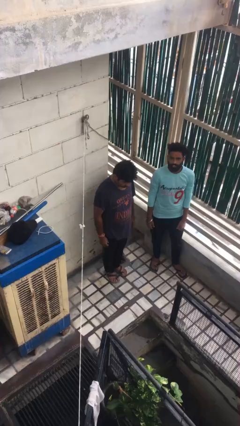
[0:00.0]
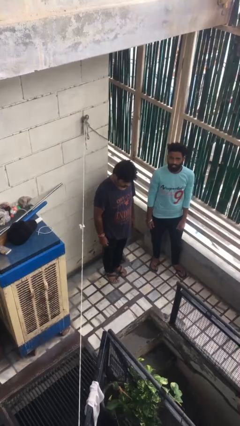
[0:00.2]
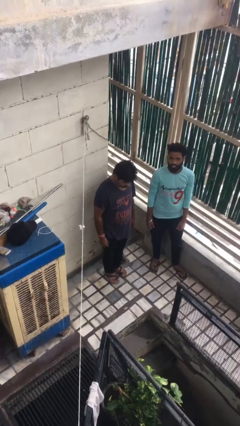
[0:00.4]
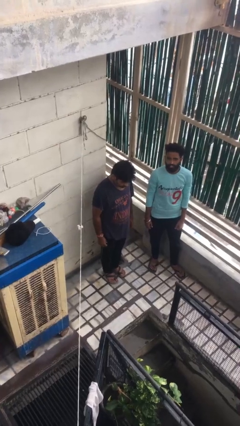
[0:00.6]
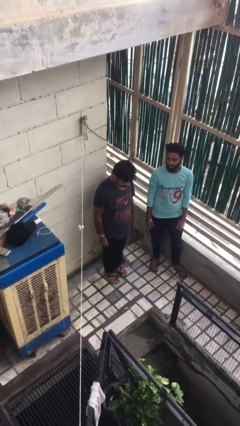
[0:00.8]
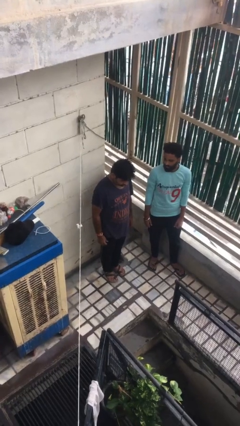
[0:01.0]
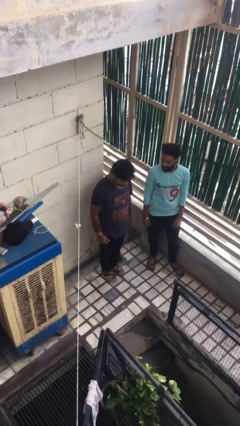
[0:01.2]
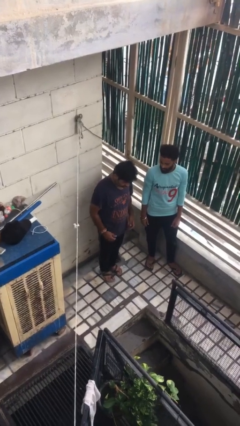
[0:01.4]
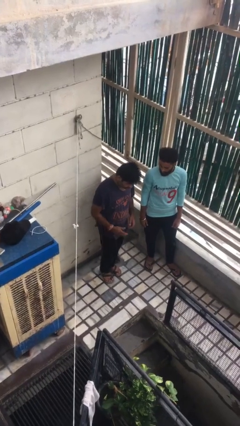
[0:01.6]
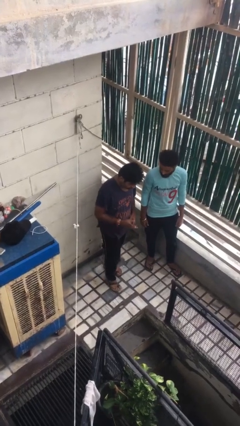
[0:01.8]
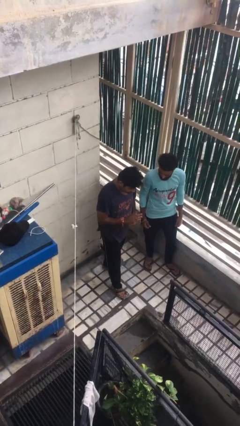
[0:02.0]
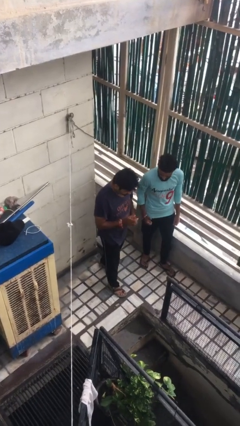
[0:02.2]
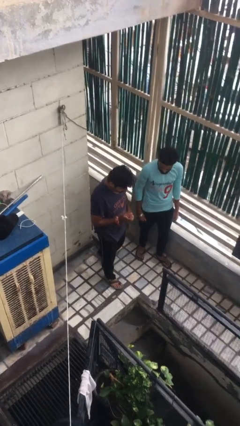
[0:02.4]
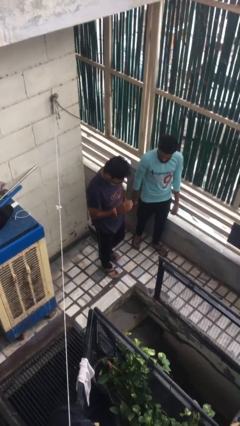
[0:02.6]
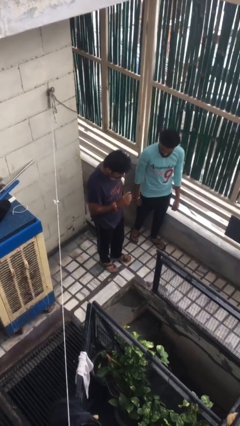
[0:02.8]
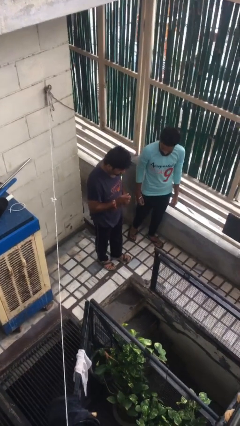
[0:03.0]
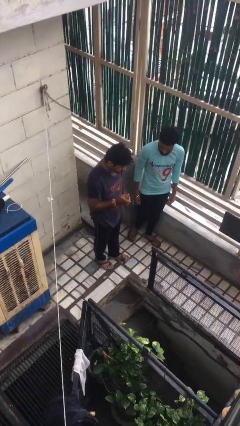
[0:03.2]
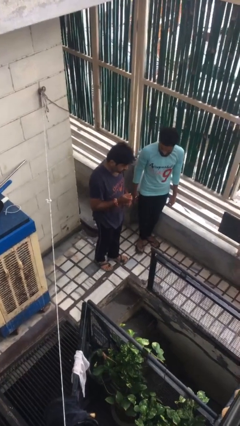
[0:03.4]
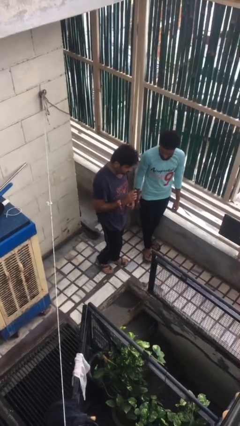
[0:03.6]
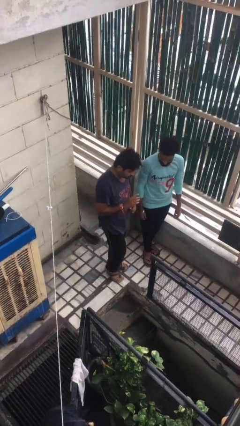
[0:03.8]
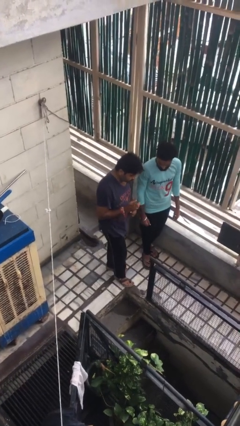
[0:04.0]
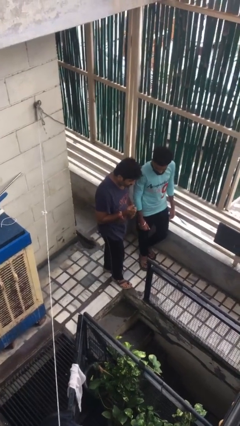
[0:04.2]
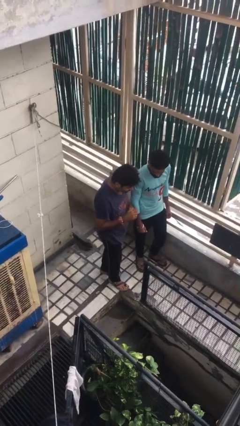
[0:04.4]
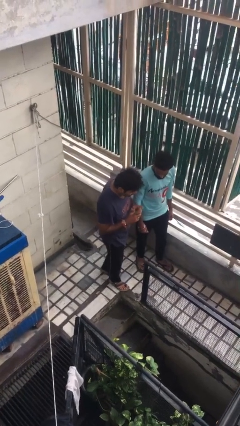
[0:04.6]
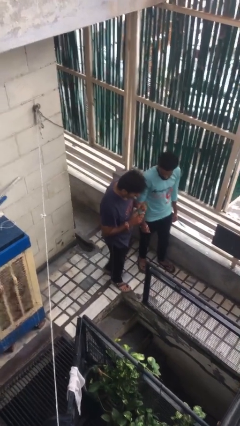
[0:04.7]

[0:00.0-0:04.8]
person talks to person

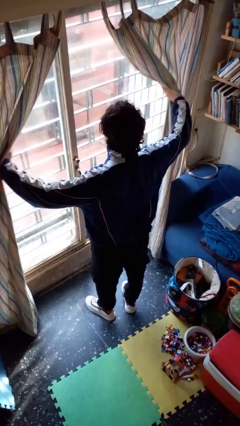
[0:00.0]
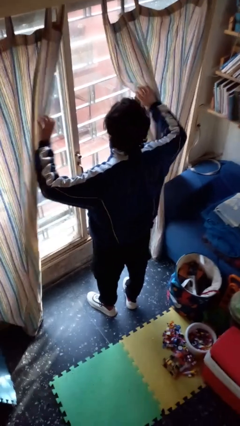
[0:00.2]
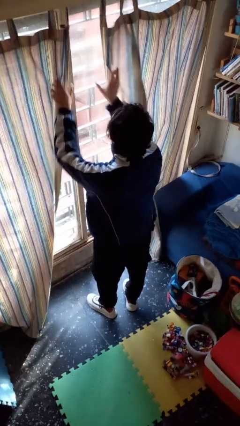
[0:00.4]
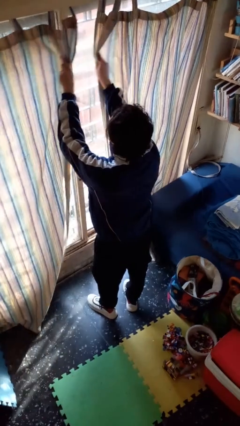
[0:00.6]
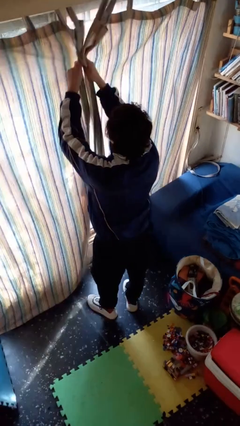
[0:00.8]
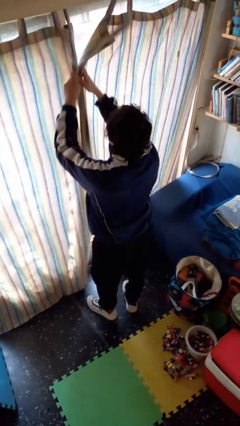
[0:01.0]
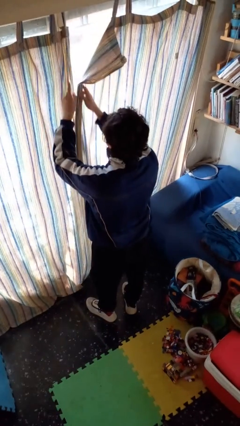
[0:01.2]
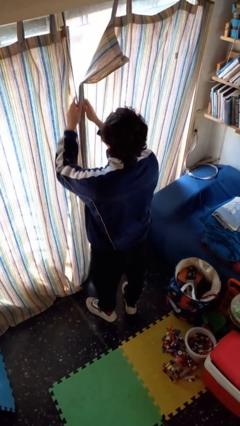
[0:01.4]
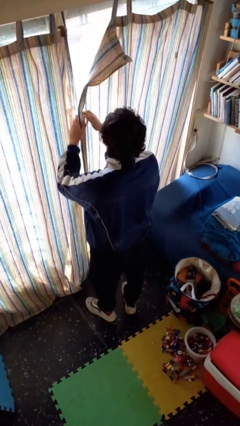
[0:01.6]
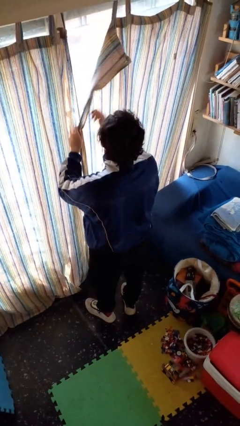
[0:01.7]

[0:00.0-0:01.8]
person closes curtains

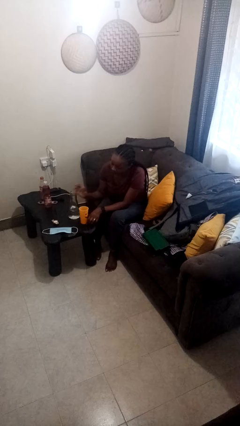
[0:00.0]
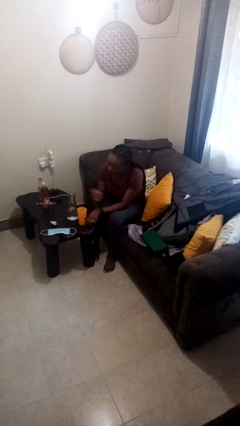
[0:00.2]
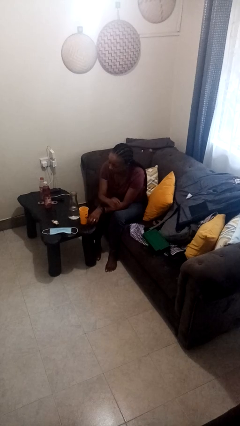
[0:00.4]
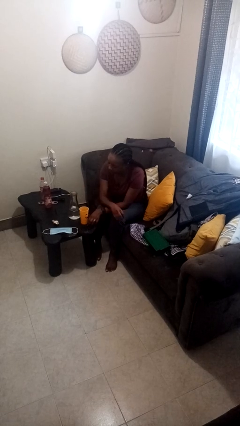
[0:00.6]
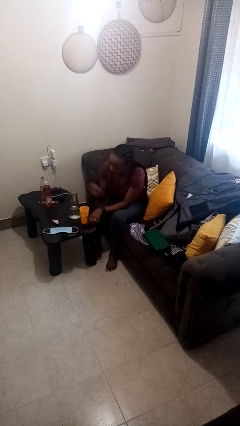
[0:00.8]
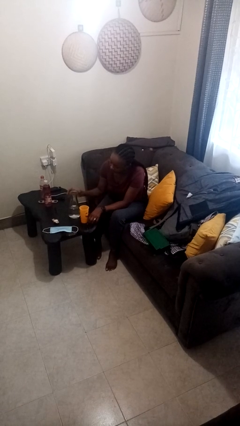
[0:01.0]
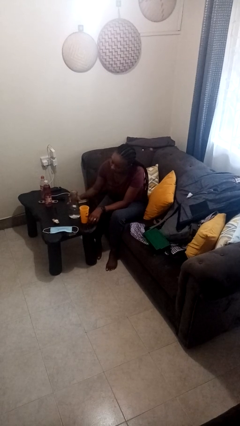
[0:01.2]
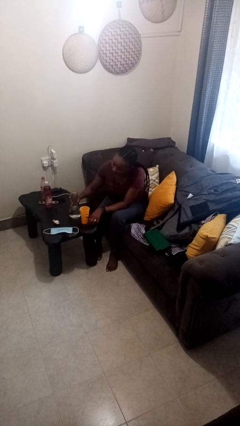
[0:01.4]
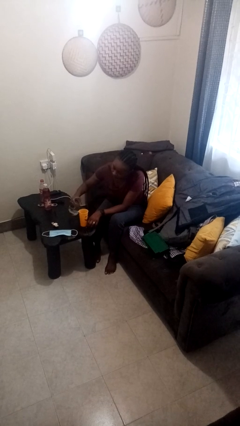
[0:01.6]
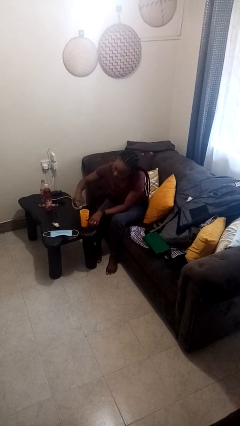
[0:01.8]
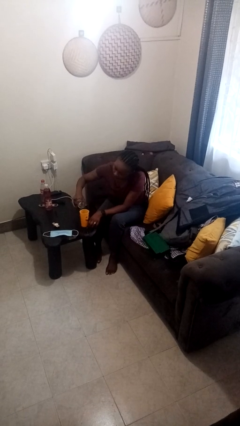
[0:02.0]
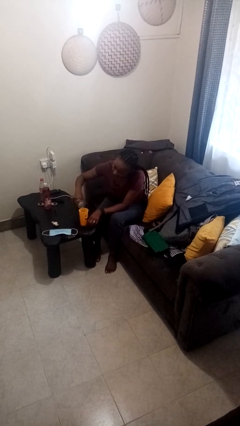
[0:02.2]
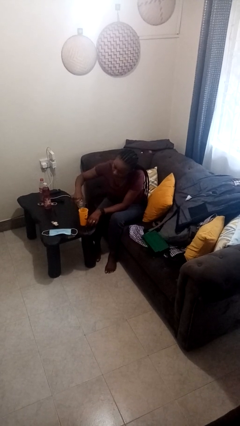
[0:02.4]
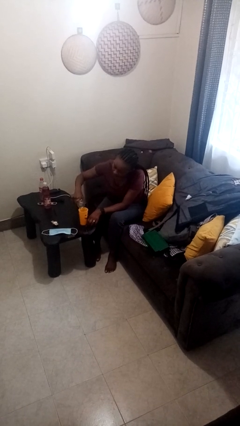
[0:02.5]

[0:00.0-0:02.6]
person pours liquid into cup

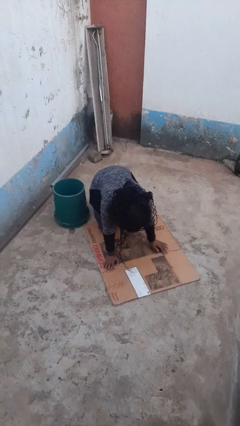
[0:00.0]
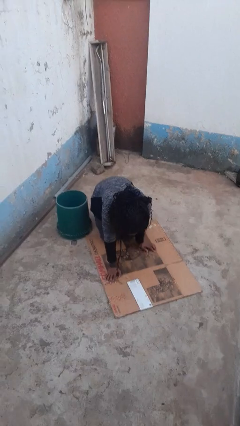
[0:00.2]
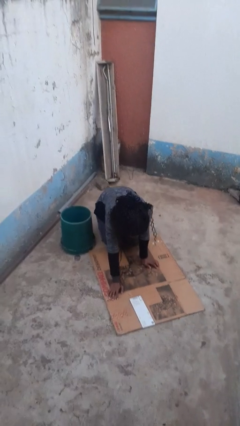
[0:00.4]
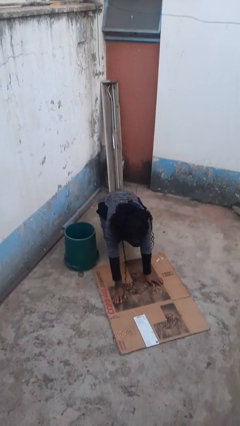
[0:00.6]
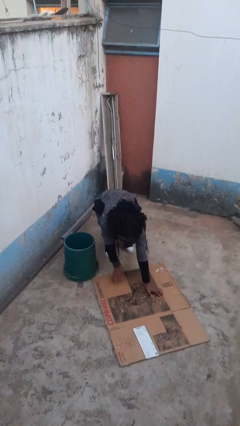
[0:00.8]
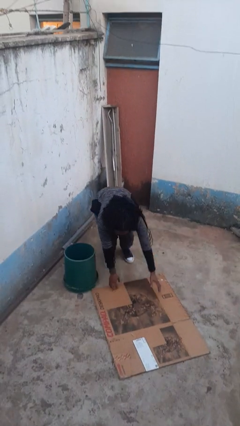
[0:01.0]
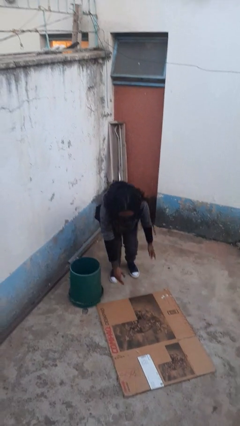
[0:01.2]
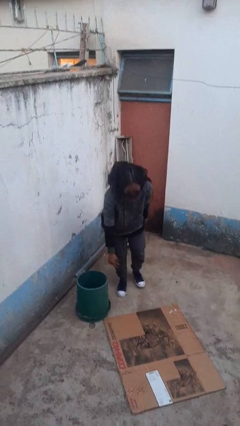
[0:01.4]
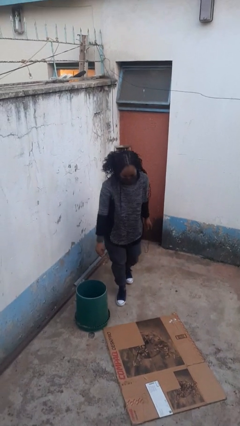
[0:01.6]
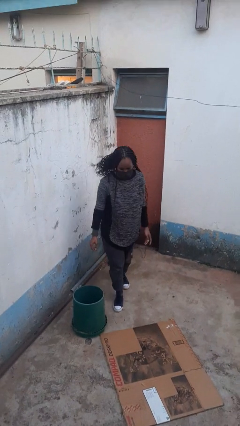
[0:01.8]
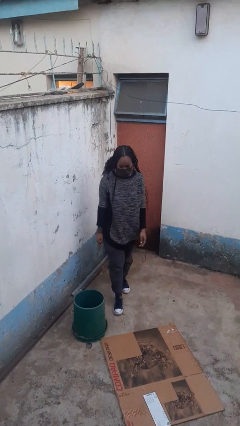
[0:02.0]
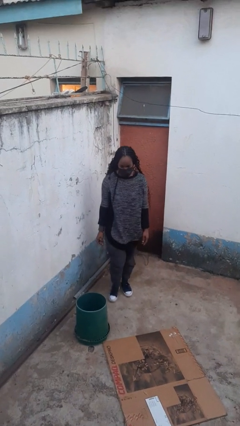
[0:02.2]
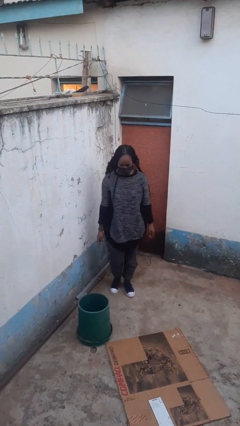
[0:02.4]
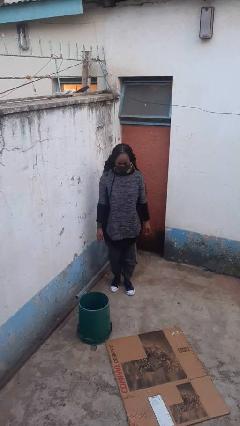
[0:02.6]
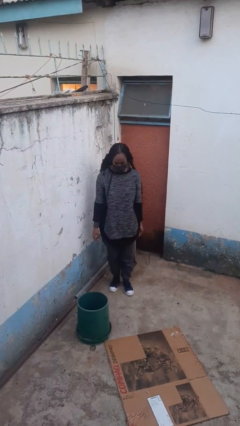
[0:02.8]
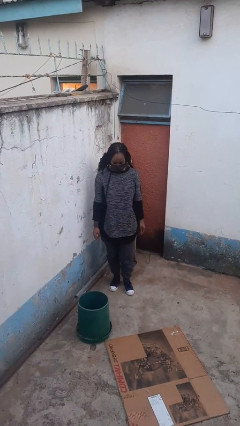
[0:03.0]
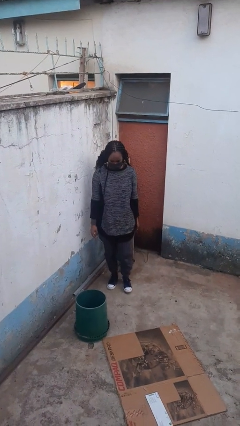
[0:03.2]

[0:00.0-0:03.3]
person stands up from floor

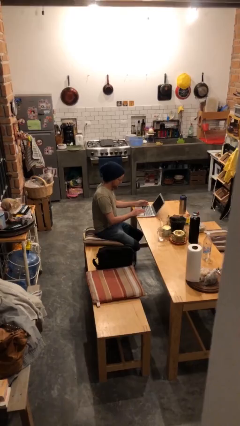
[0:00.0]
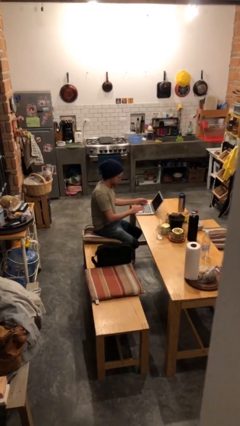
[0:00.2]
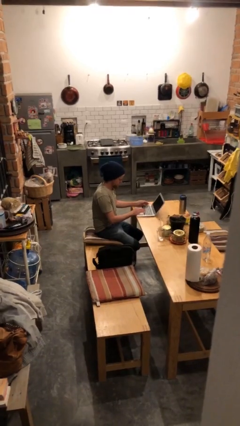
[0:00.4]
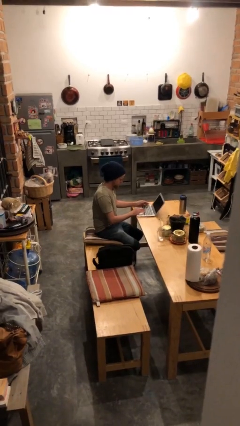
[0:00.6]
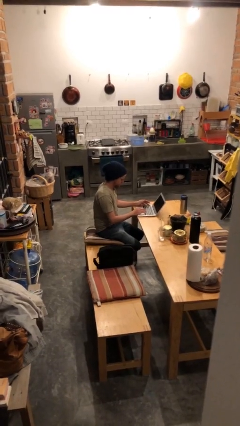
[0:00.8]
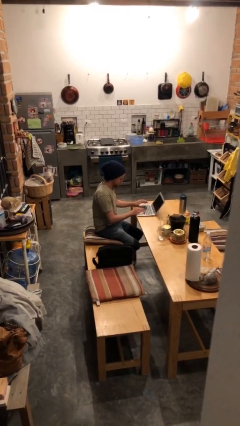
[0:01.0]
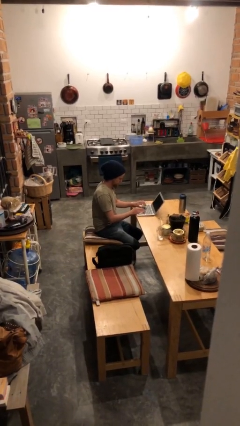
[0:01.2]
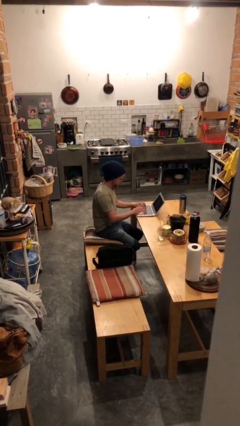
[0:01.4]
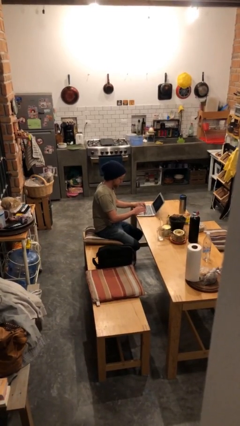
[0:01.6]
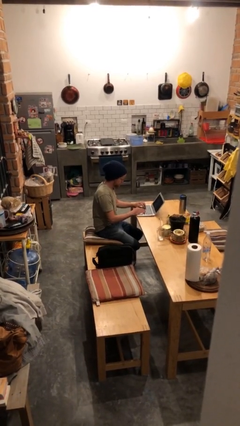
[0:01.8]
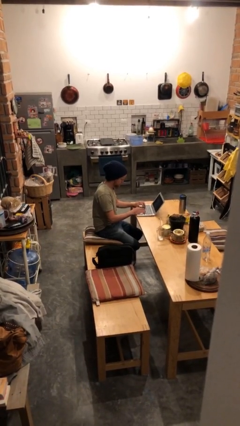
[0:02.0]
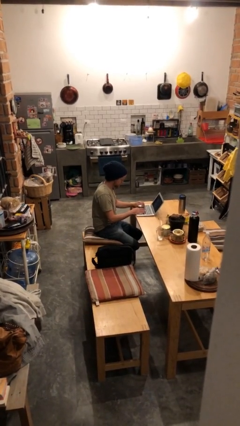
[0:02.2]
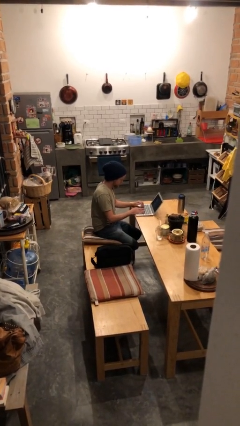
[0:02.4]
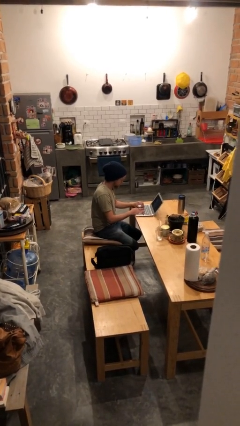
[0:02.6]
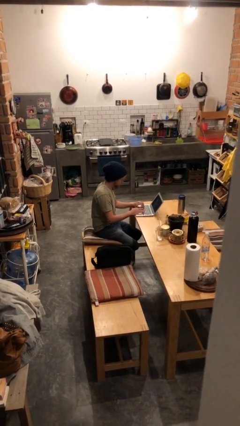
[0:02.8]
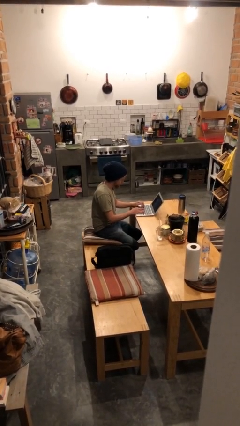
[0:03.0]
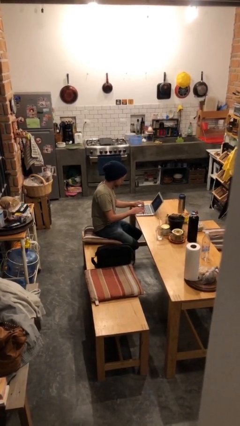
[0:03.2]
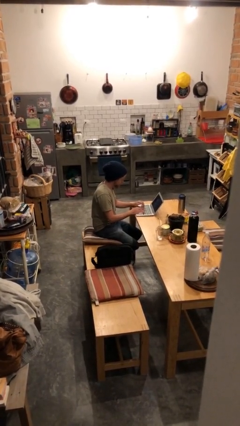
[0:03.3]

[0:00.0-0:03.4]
person interacts with laptop

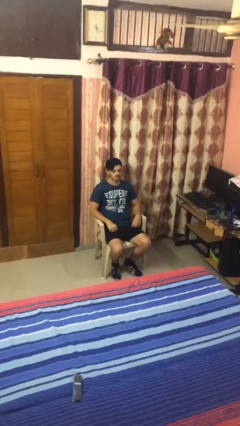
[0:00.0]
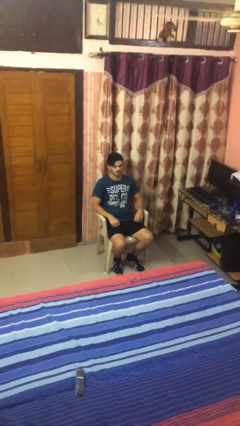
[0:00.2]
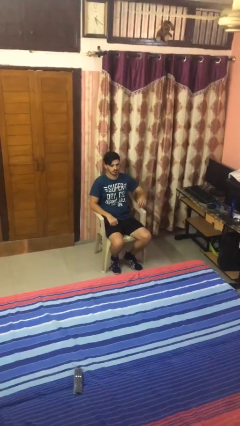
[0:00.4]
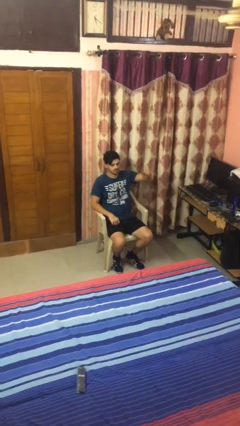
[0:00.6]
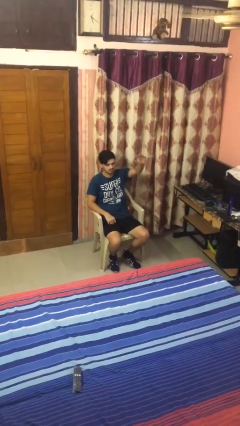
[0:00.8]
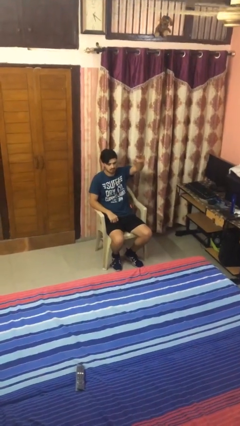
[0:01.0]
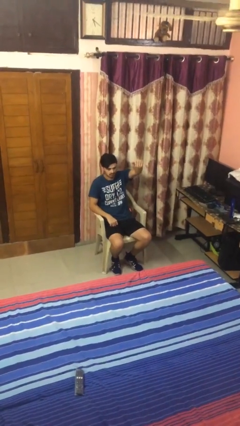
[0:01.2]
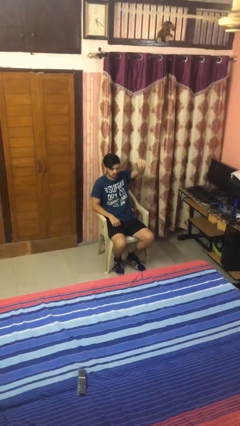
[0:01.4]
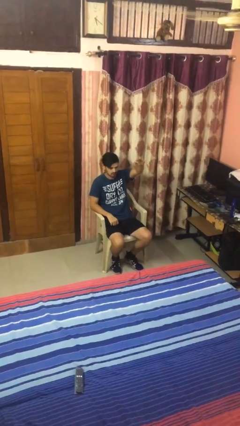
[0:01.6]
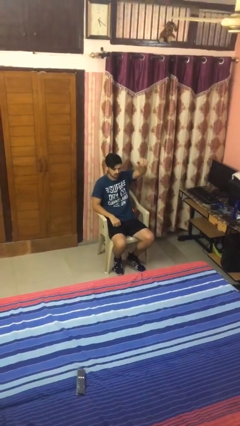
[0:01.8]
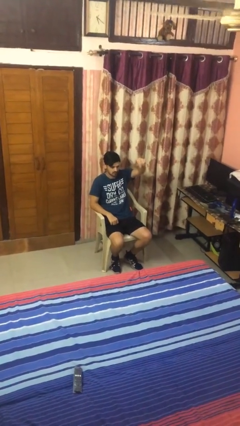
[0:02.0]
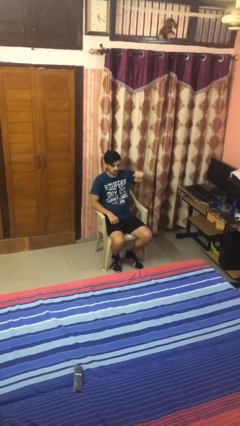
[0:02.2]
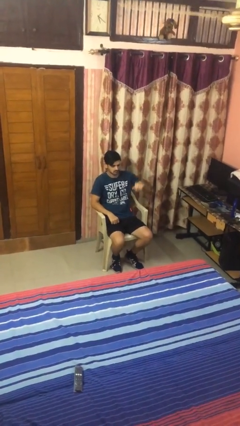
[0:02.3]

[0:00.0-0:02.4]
person gestures come here
